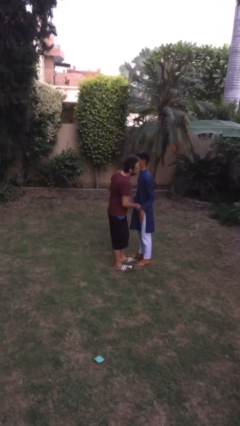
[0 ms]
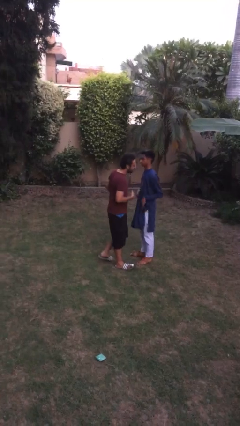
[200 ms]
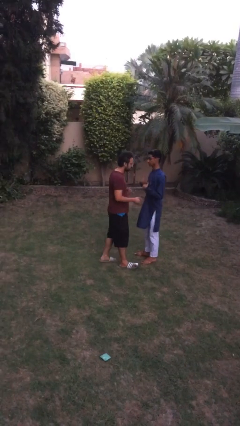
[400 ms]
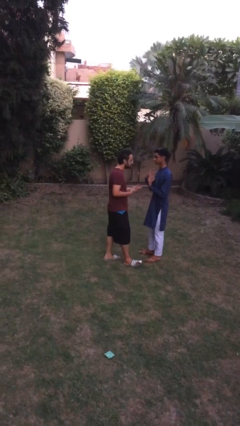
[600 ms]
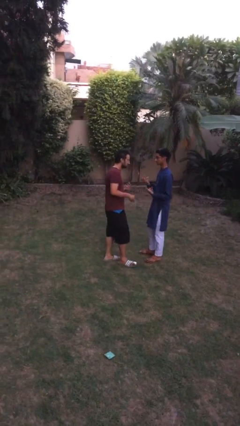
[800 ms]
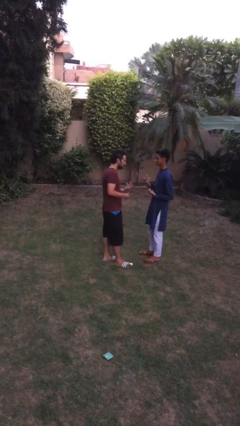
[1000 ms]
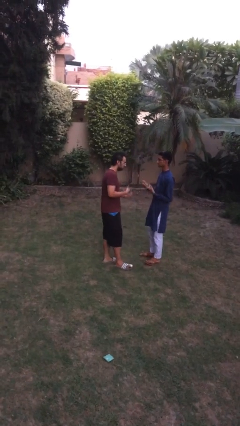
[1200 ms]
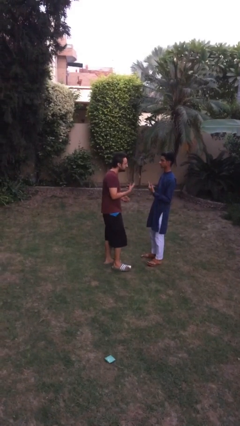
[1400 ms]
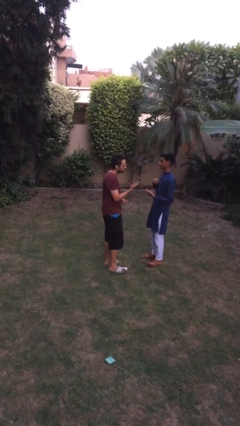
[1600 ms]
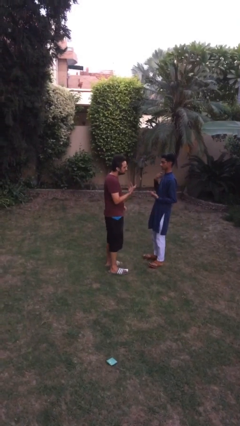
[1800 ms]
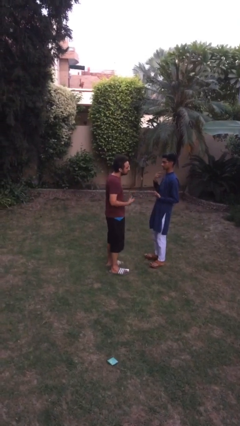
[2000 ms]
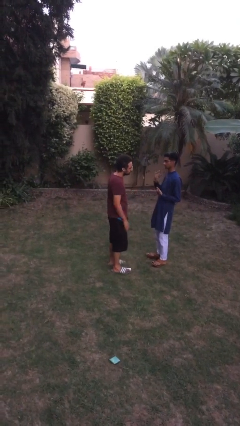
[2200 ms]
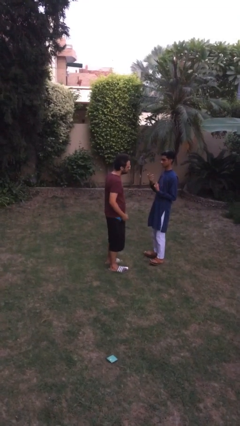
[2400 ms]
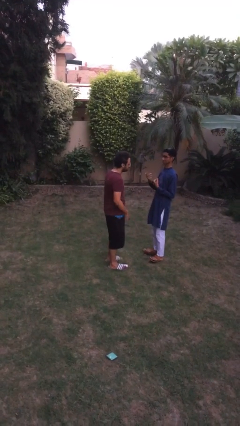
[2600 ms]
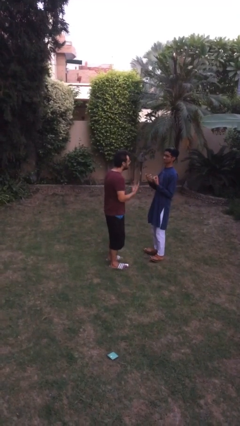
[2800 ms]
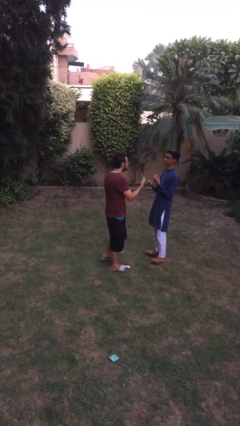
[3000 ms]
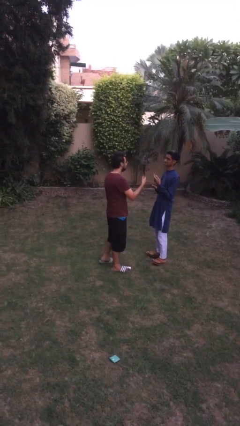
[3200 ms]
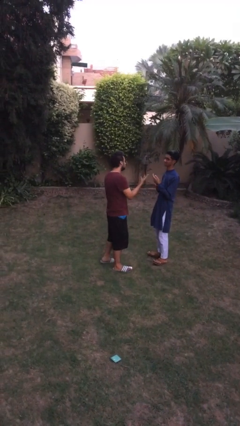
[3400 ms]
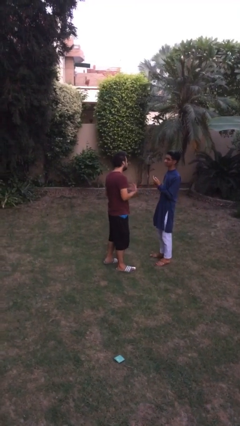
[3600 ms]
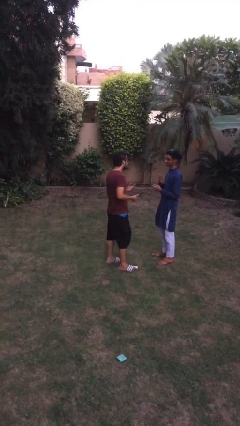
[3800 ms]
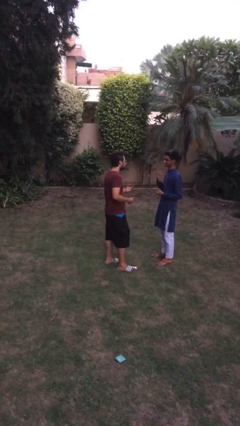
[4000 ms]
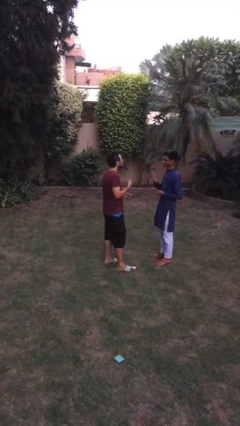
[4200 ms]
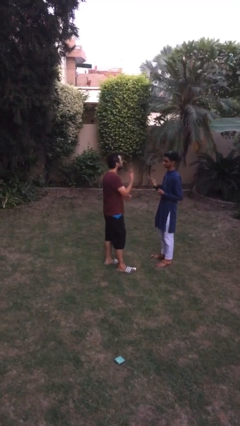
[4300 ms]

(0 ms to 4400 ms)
person talks to person

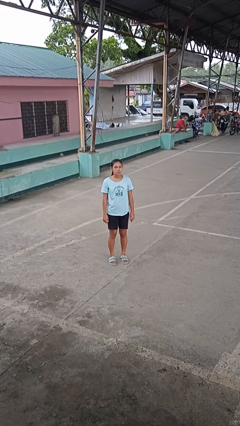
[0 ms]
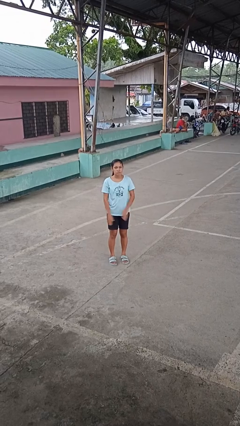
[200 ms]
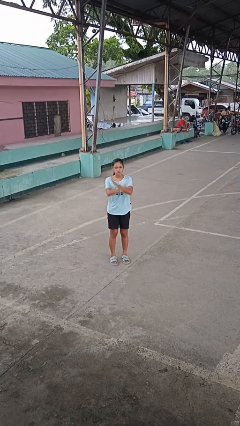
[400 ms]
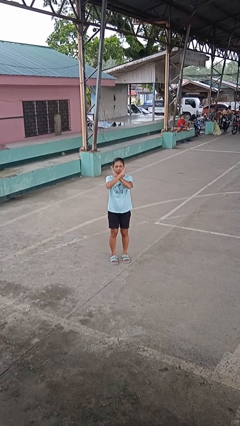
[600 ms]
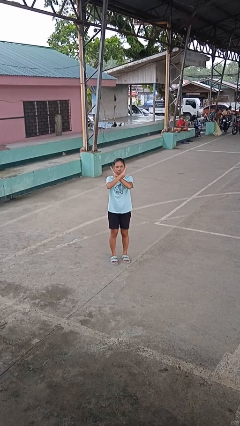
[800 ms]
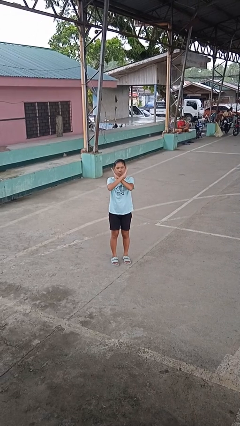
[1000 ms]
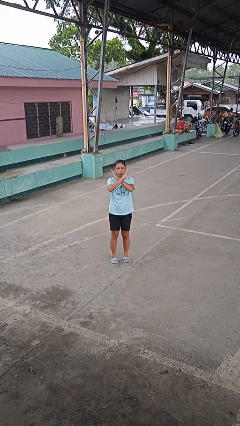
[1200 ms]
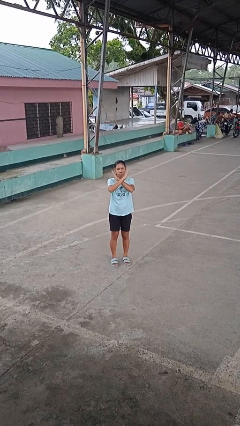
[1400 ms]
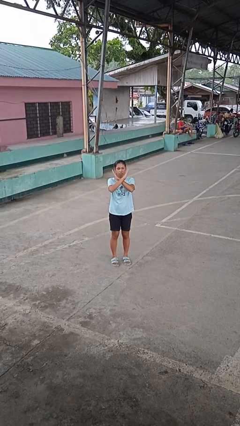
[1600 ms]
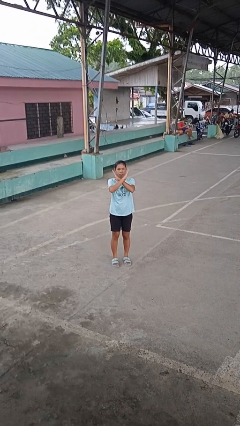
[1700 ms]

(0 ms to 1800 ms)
person gestures arms x

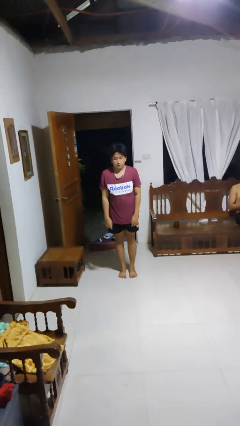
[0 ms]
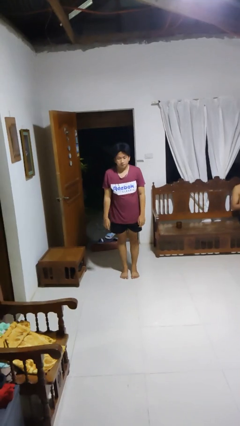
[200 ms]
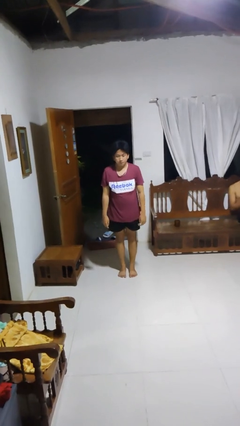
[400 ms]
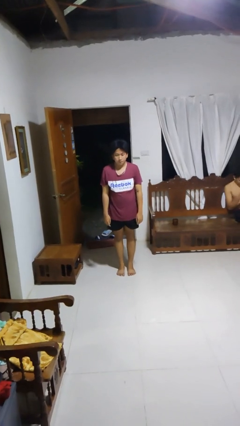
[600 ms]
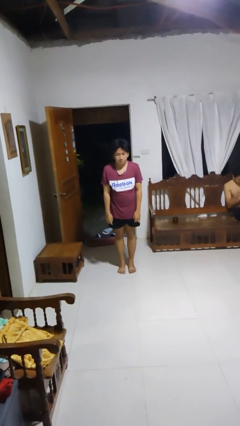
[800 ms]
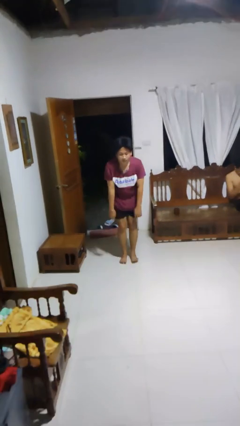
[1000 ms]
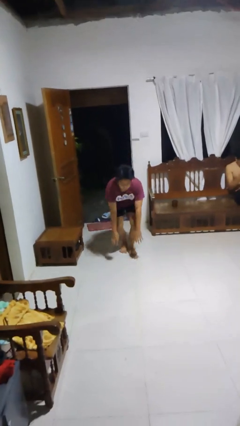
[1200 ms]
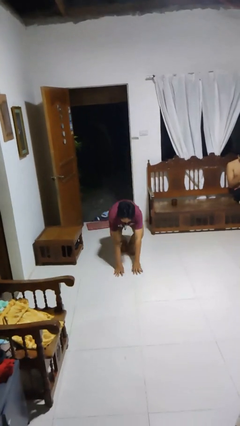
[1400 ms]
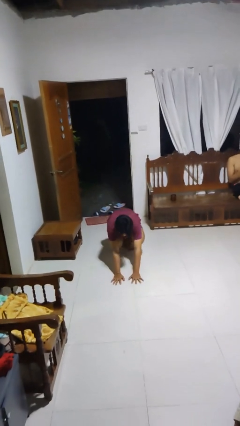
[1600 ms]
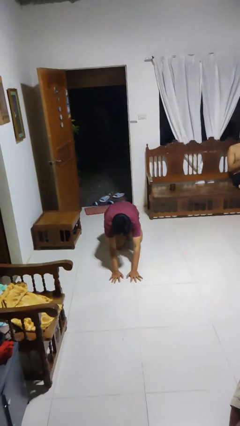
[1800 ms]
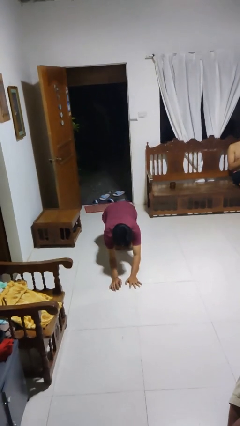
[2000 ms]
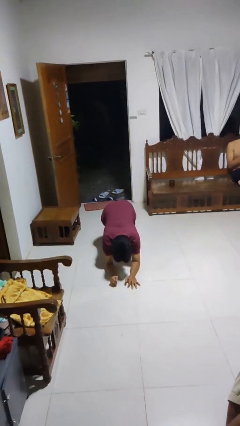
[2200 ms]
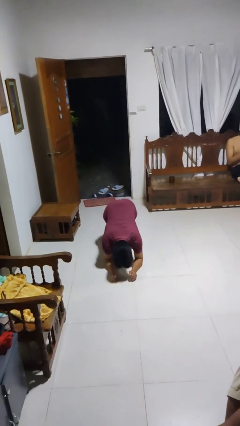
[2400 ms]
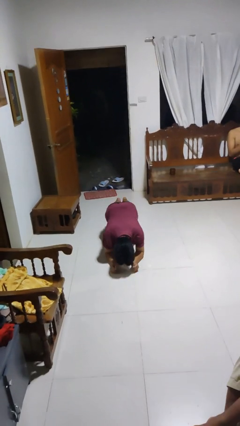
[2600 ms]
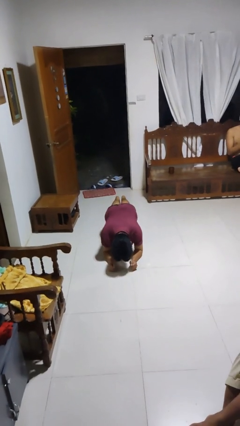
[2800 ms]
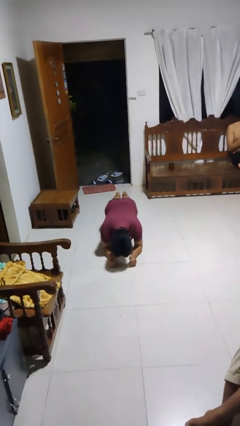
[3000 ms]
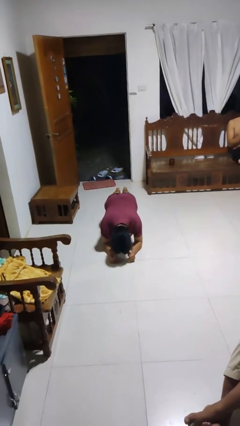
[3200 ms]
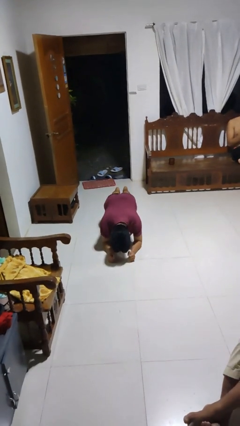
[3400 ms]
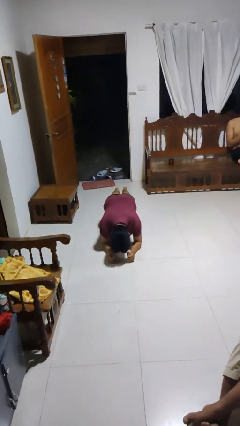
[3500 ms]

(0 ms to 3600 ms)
person exercises with plank

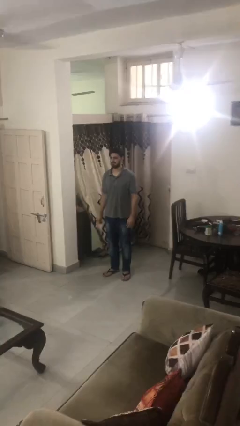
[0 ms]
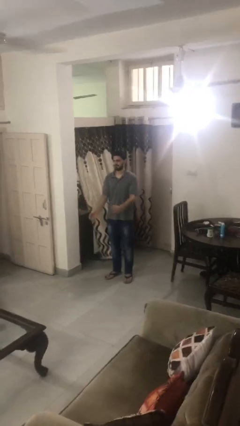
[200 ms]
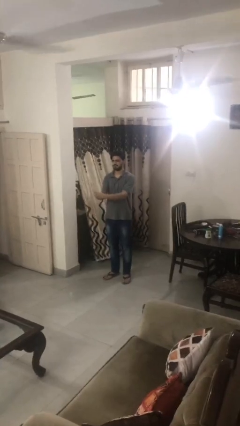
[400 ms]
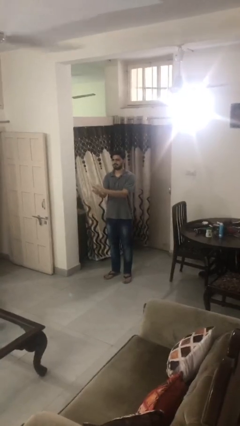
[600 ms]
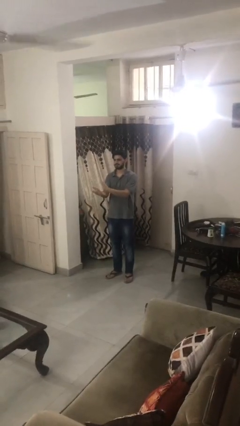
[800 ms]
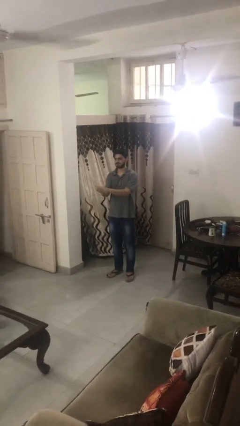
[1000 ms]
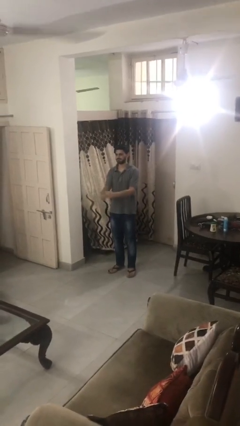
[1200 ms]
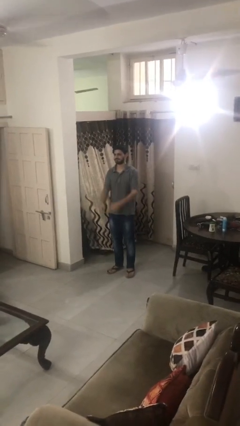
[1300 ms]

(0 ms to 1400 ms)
person claps hands

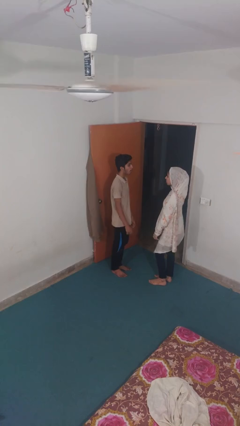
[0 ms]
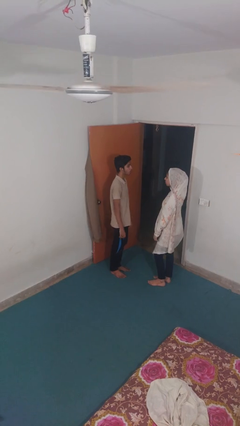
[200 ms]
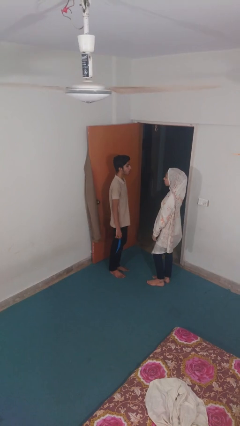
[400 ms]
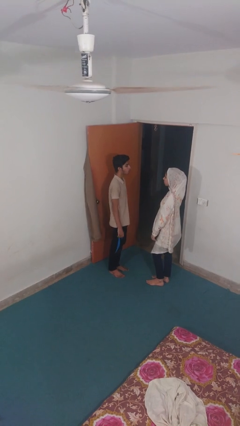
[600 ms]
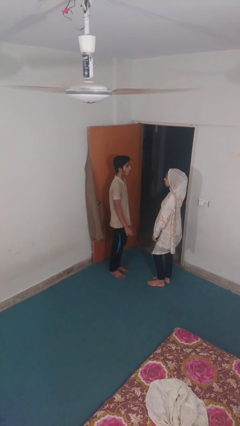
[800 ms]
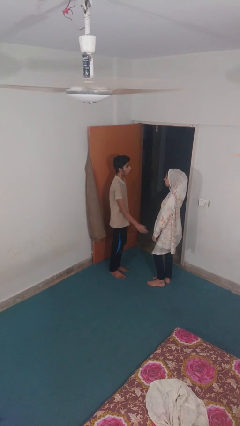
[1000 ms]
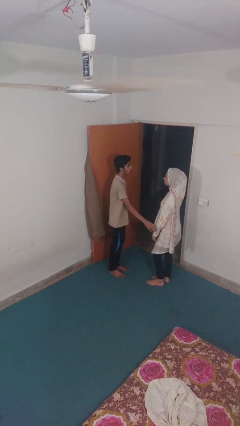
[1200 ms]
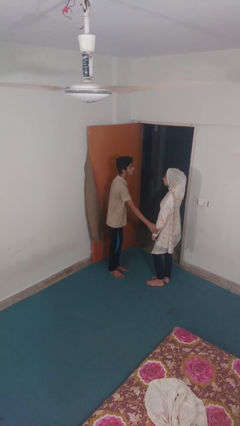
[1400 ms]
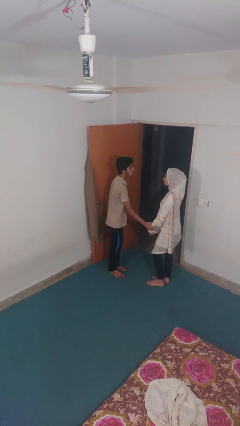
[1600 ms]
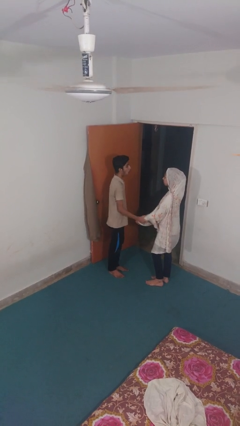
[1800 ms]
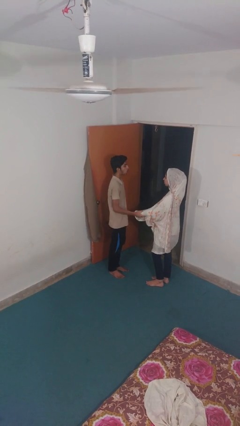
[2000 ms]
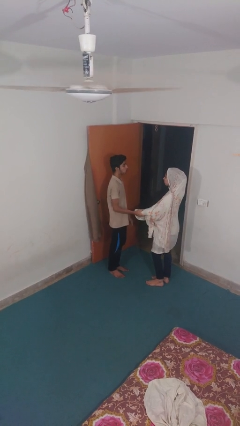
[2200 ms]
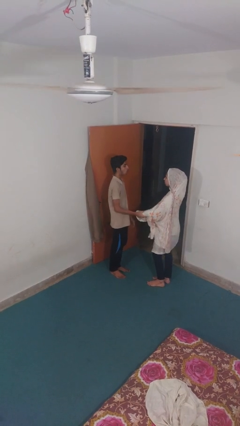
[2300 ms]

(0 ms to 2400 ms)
person grabs person by forearm

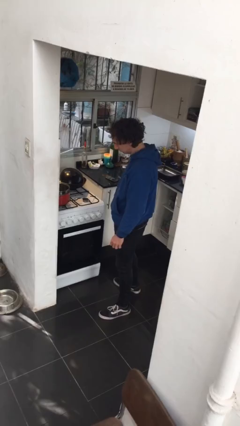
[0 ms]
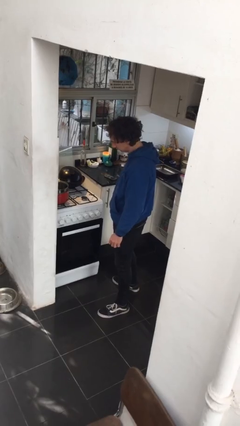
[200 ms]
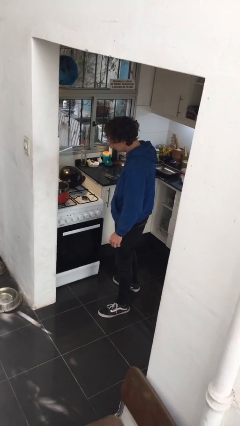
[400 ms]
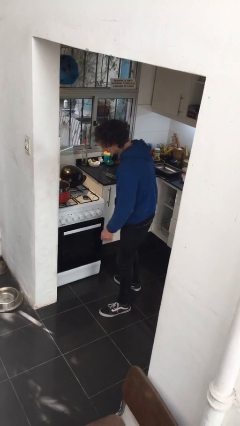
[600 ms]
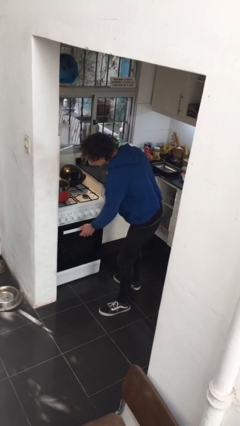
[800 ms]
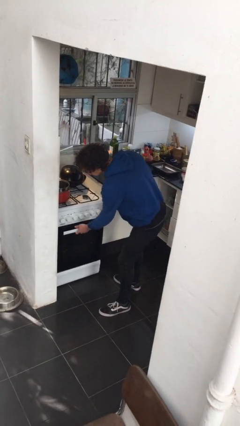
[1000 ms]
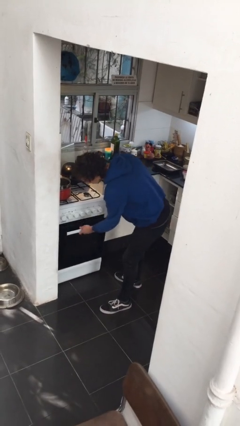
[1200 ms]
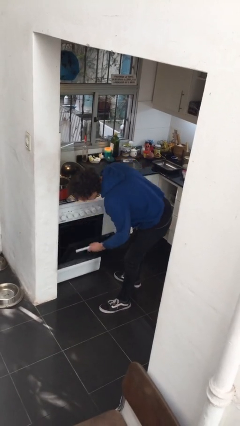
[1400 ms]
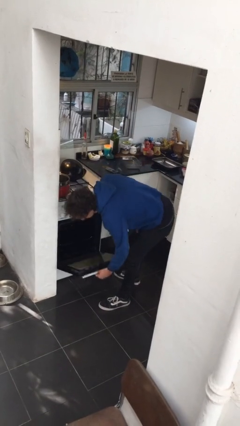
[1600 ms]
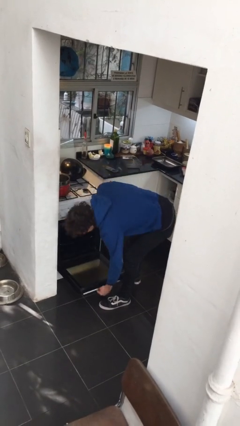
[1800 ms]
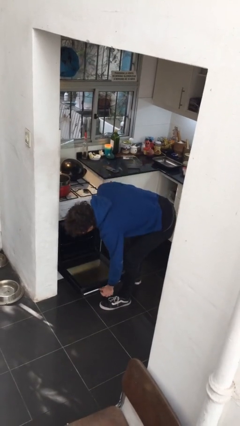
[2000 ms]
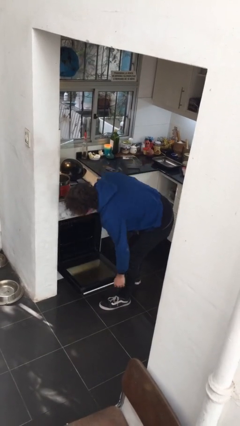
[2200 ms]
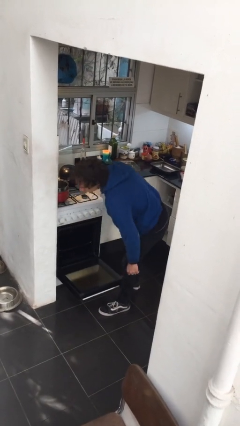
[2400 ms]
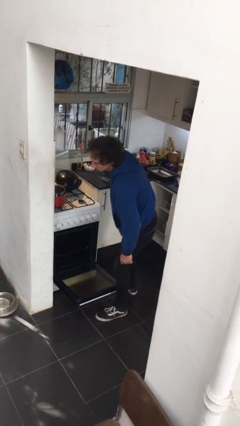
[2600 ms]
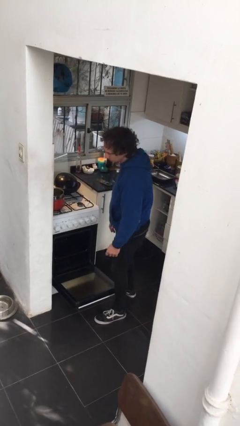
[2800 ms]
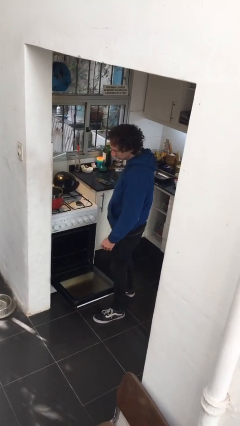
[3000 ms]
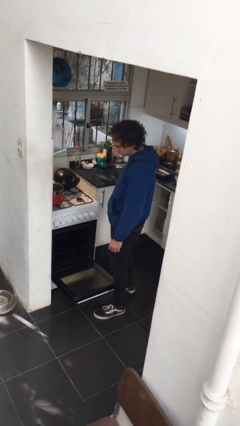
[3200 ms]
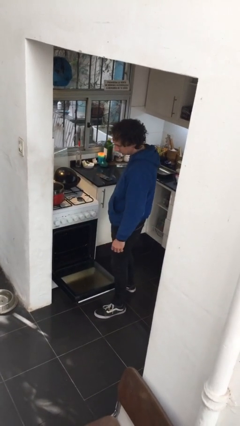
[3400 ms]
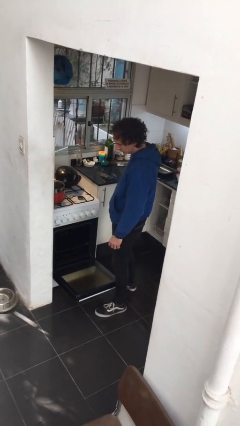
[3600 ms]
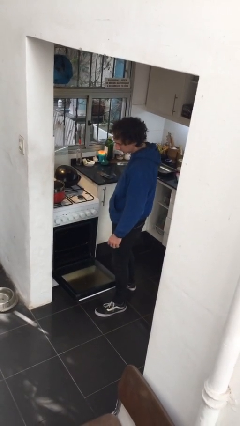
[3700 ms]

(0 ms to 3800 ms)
person opens oven door

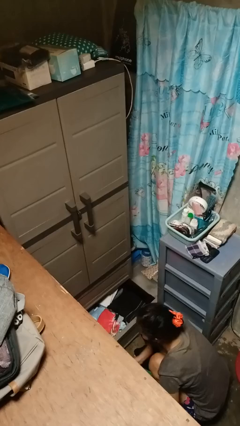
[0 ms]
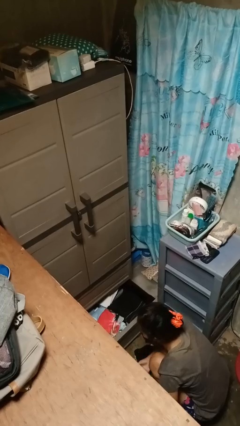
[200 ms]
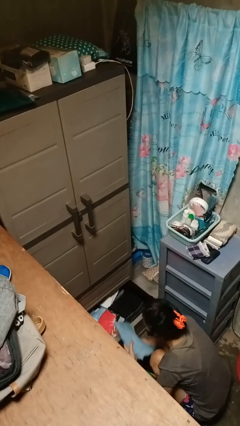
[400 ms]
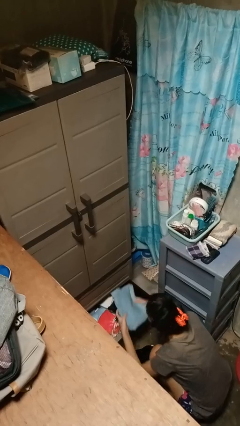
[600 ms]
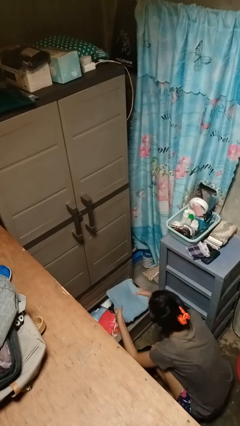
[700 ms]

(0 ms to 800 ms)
person puts clothes into dresser
